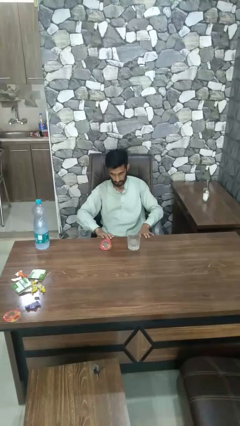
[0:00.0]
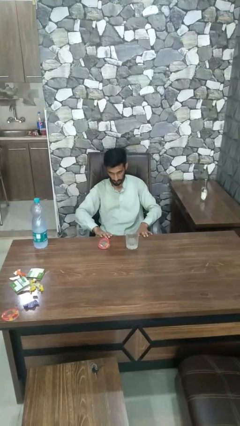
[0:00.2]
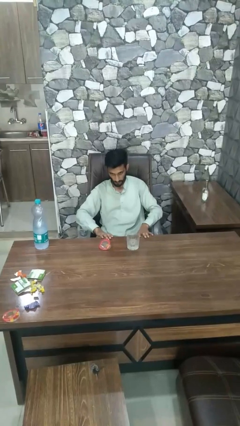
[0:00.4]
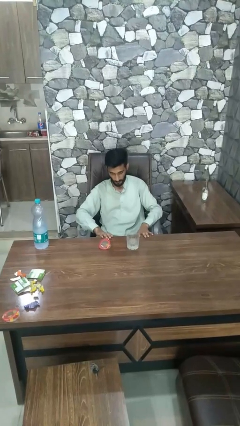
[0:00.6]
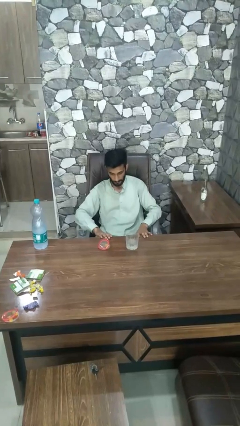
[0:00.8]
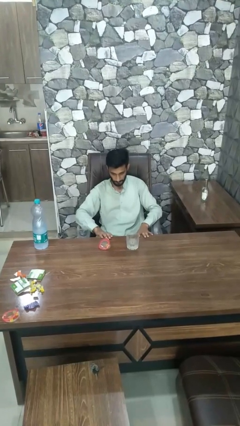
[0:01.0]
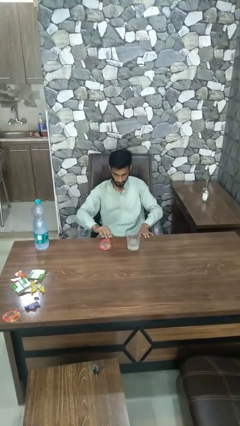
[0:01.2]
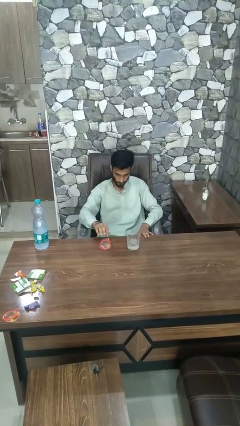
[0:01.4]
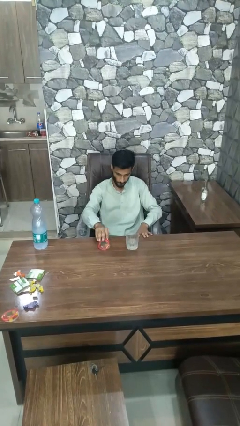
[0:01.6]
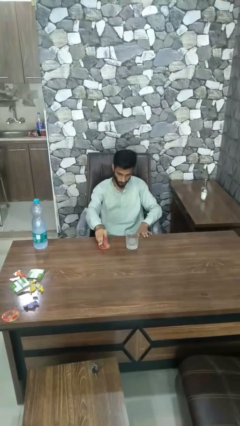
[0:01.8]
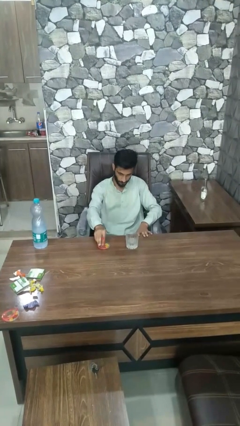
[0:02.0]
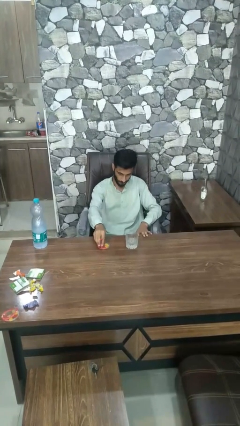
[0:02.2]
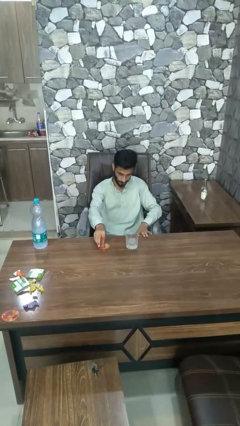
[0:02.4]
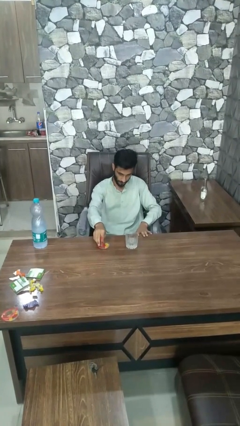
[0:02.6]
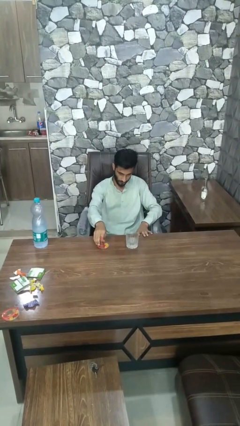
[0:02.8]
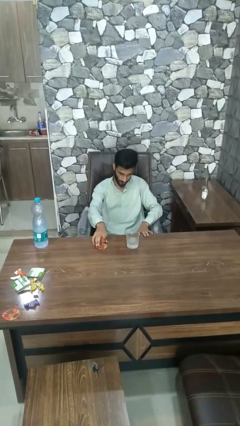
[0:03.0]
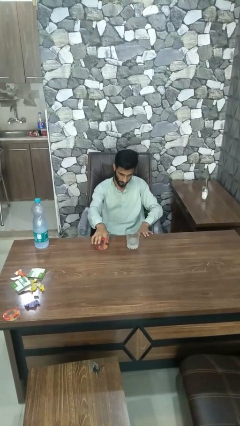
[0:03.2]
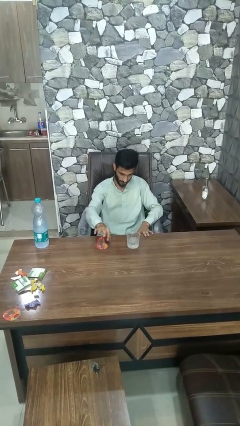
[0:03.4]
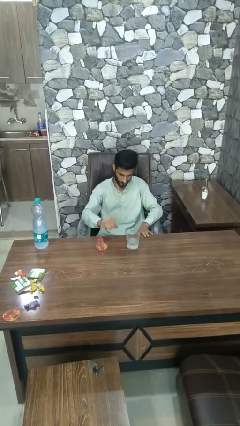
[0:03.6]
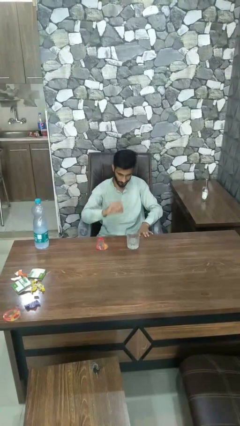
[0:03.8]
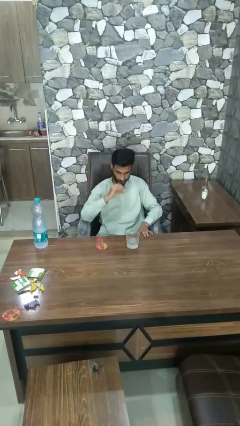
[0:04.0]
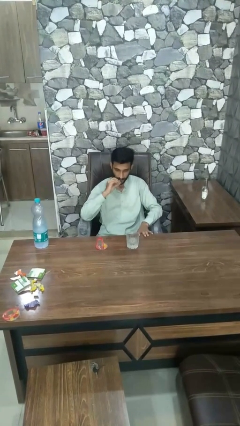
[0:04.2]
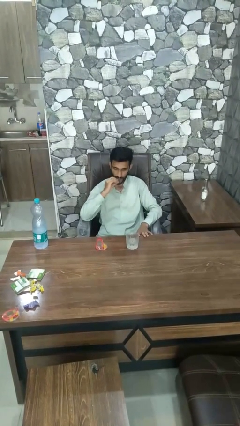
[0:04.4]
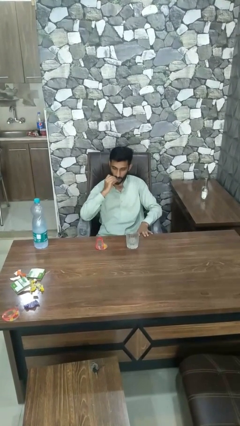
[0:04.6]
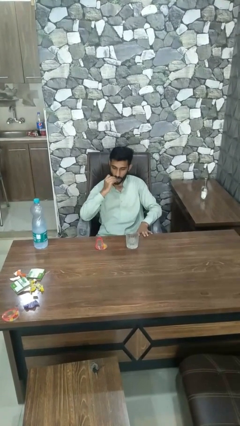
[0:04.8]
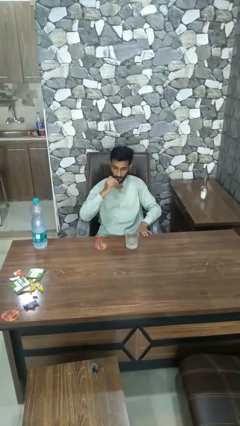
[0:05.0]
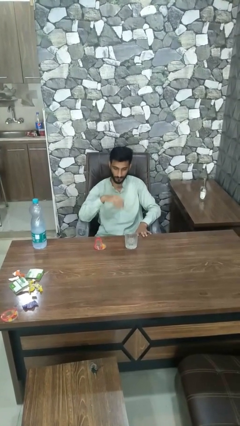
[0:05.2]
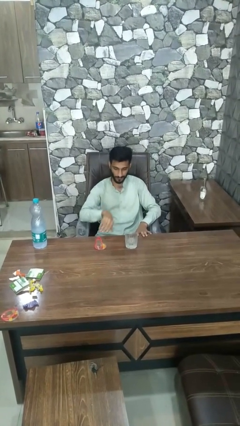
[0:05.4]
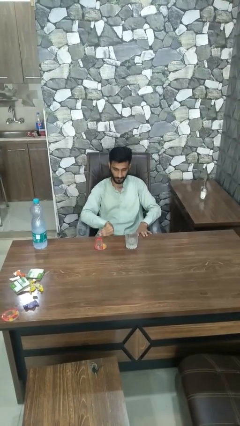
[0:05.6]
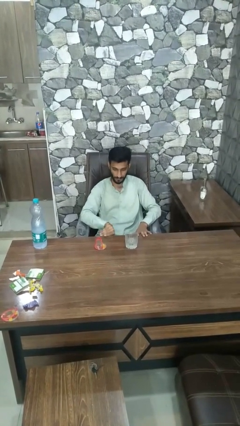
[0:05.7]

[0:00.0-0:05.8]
person takes medicine pills

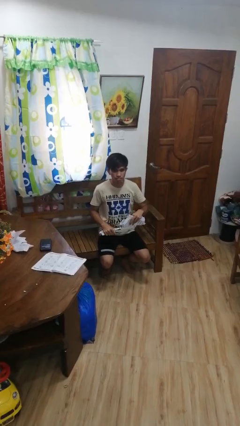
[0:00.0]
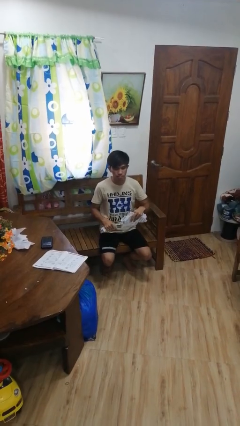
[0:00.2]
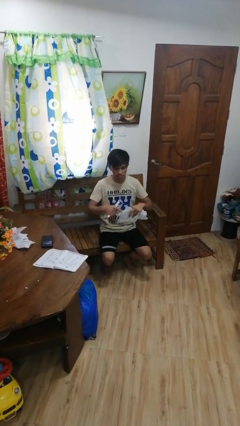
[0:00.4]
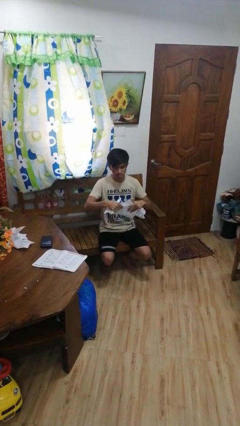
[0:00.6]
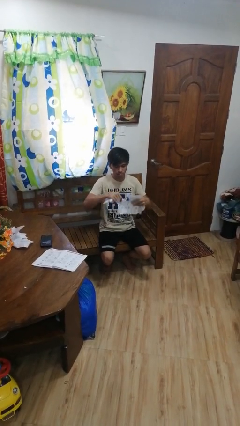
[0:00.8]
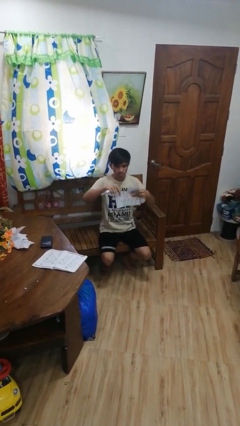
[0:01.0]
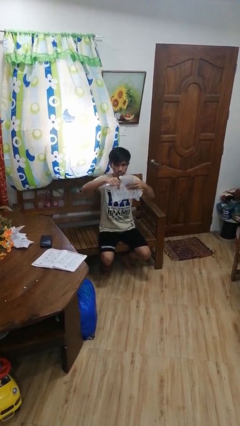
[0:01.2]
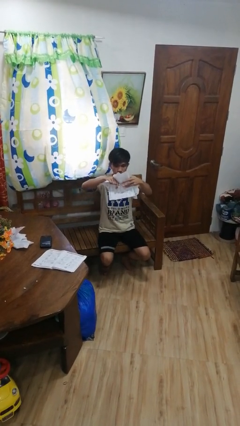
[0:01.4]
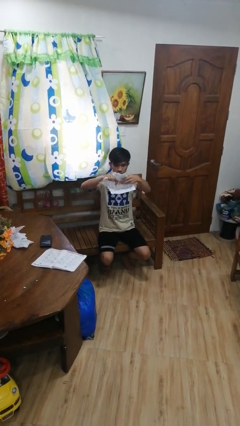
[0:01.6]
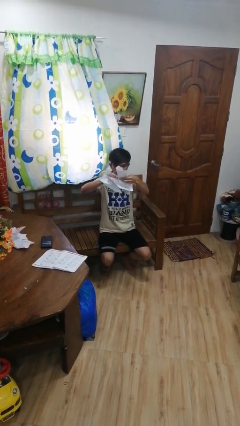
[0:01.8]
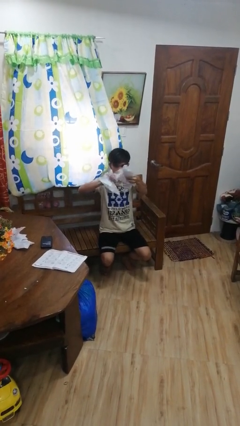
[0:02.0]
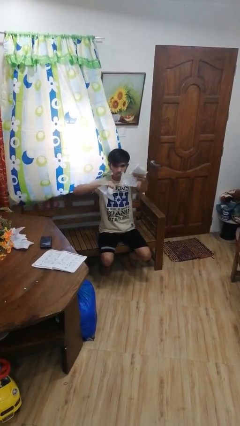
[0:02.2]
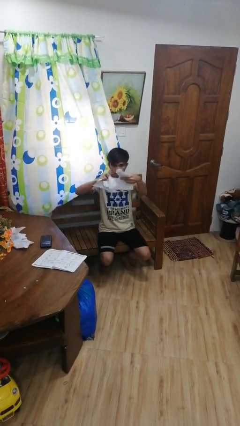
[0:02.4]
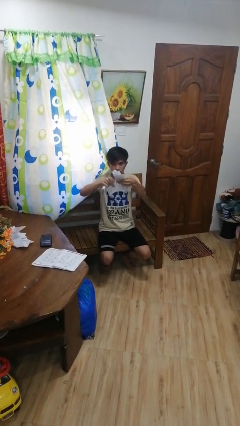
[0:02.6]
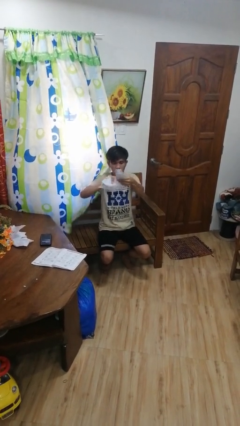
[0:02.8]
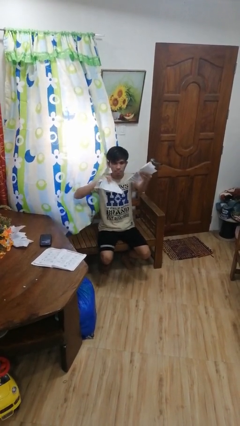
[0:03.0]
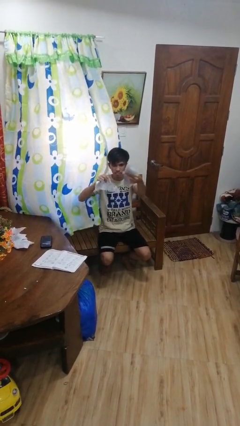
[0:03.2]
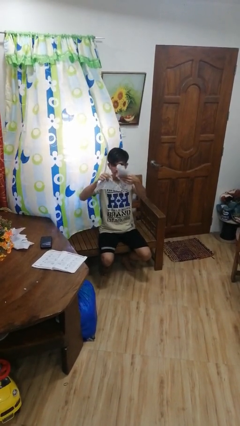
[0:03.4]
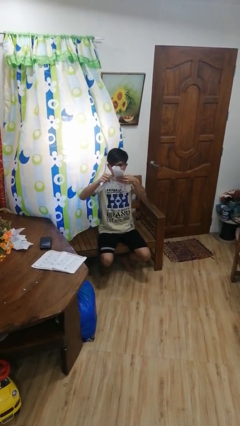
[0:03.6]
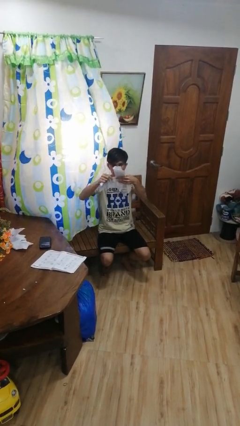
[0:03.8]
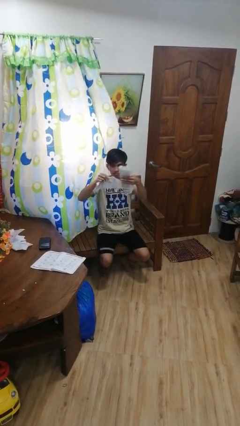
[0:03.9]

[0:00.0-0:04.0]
person tears paper

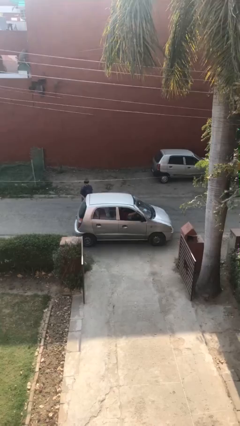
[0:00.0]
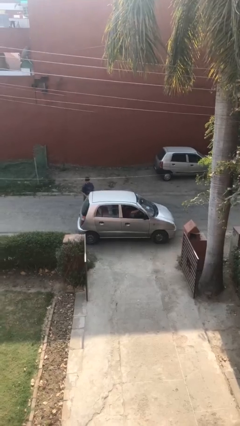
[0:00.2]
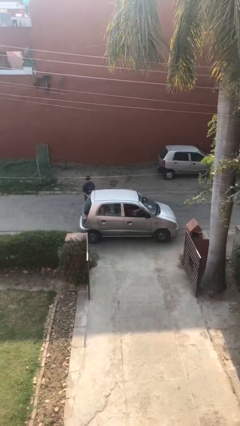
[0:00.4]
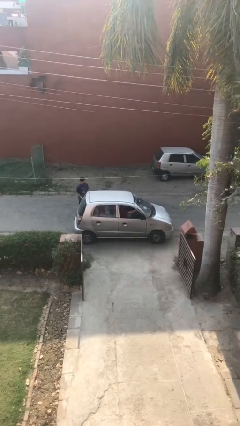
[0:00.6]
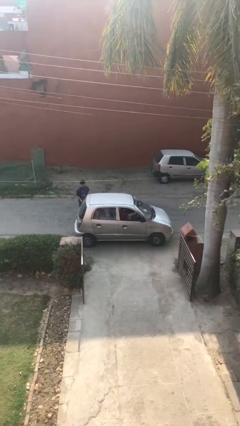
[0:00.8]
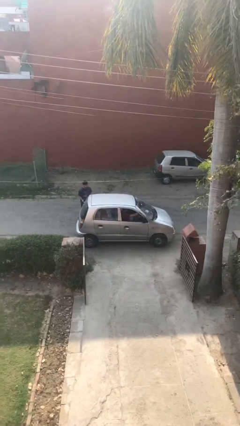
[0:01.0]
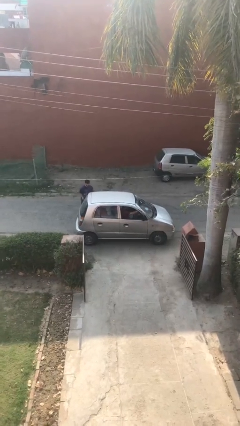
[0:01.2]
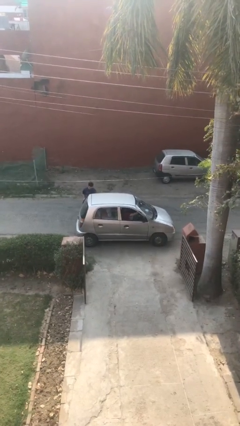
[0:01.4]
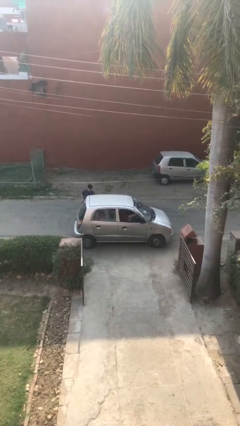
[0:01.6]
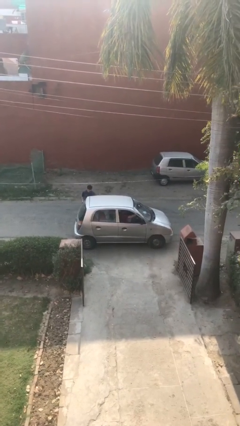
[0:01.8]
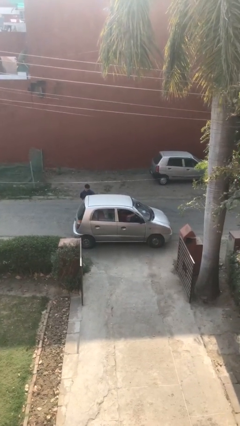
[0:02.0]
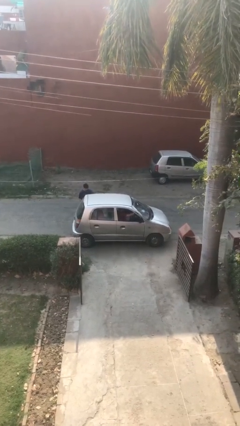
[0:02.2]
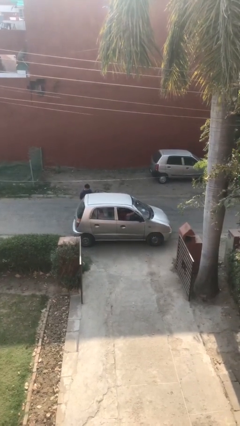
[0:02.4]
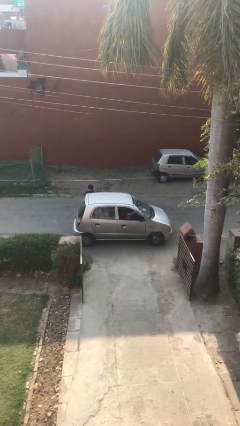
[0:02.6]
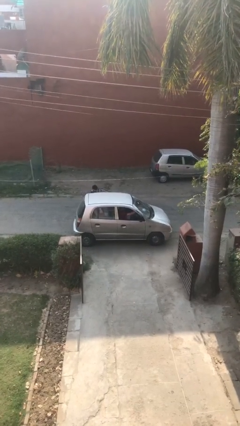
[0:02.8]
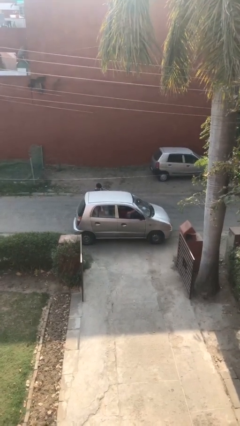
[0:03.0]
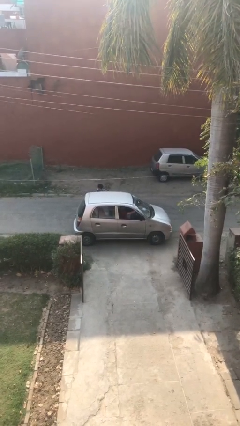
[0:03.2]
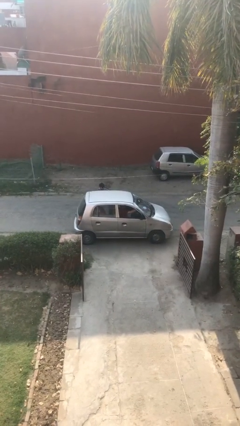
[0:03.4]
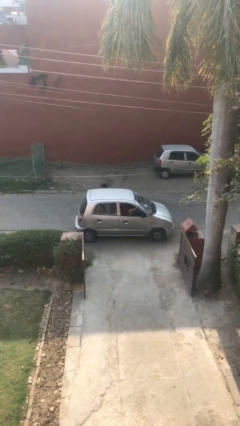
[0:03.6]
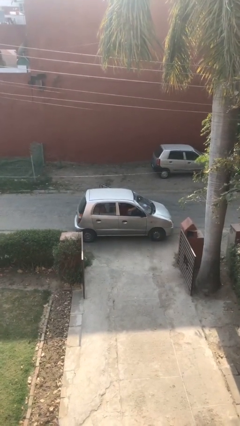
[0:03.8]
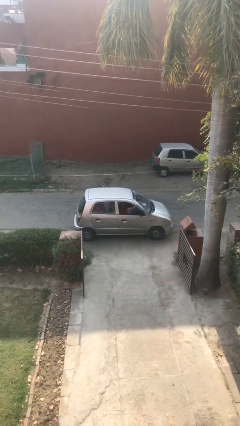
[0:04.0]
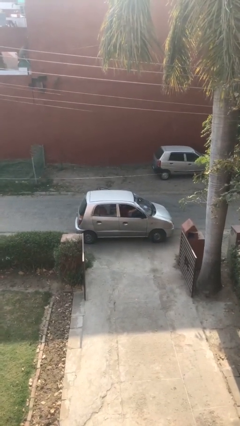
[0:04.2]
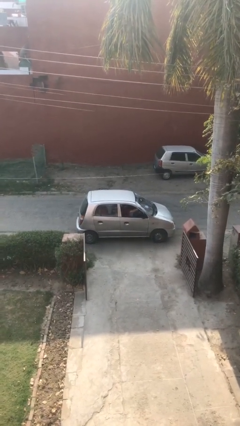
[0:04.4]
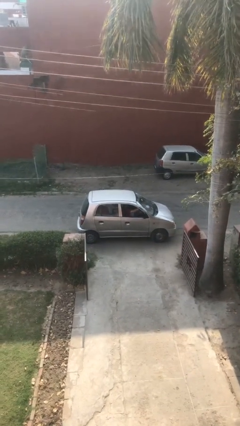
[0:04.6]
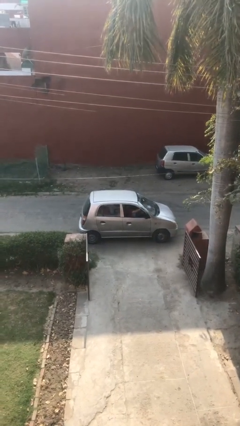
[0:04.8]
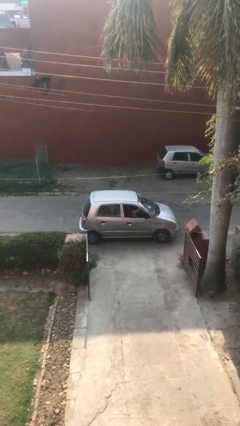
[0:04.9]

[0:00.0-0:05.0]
car picks up person

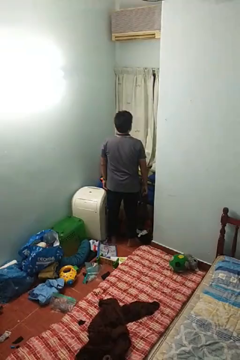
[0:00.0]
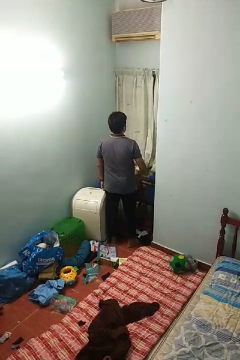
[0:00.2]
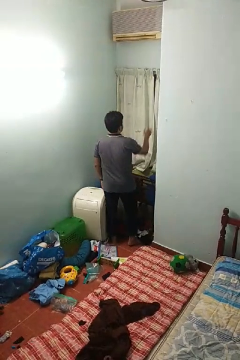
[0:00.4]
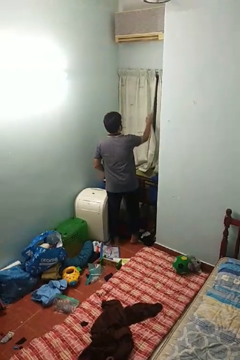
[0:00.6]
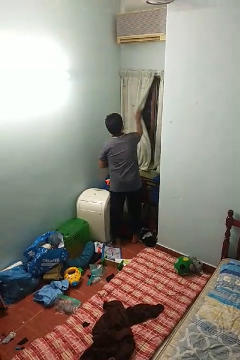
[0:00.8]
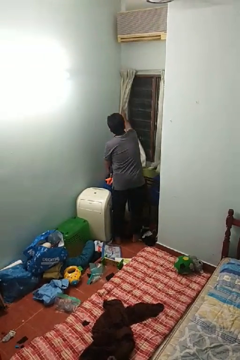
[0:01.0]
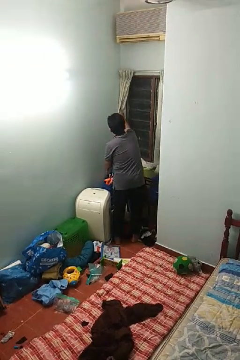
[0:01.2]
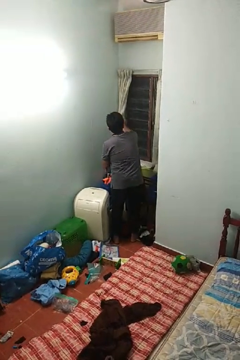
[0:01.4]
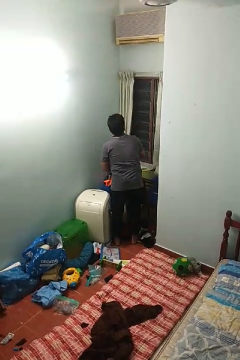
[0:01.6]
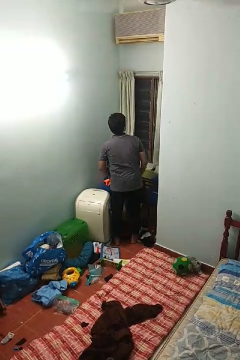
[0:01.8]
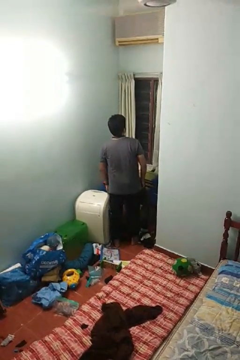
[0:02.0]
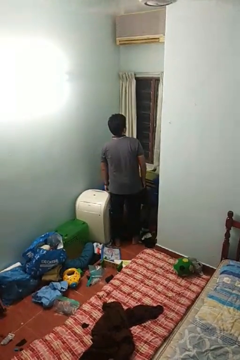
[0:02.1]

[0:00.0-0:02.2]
person opens curtains

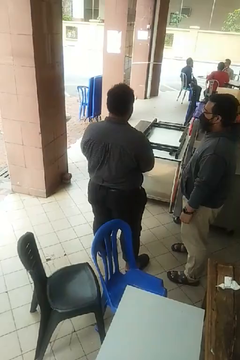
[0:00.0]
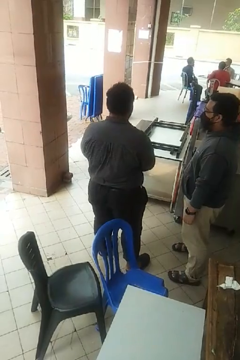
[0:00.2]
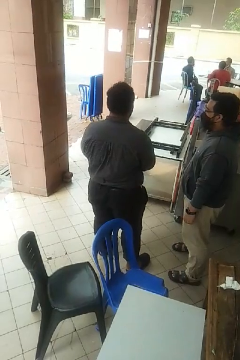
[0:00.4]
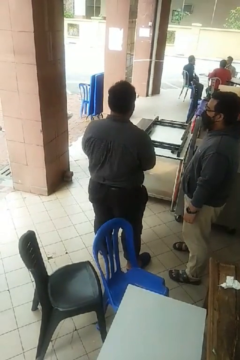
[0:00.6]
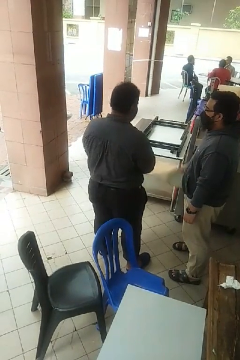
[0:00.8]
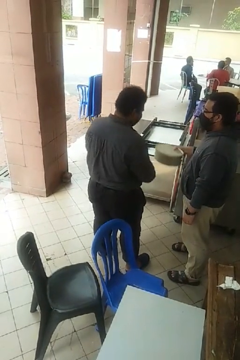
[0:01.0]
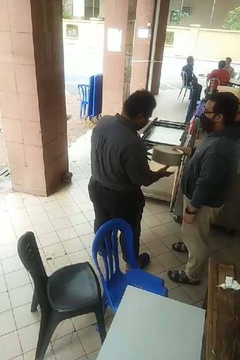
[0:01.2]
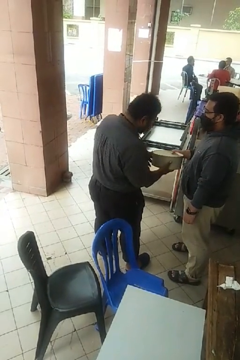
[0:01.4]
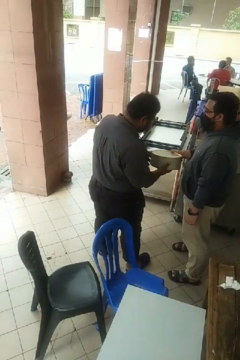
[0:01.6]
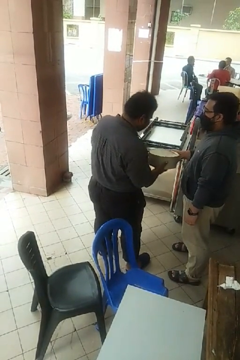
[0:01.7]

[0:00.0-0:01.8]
person transfers object to person
